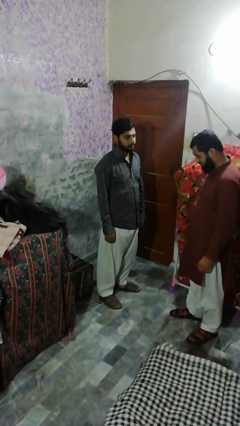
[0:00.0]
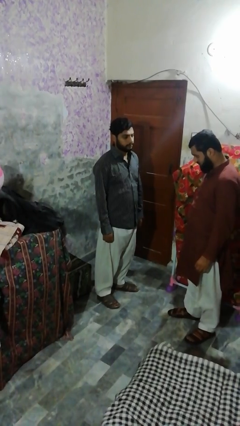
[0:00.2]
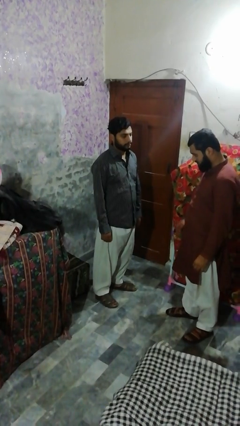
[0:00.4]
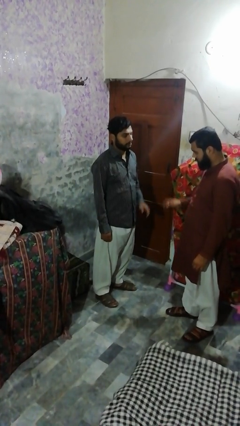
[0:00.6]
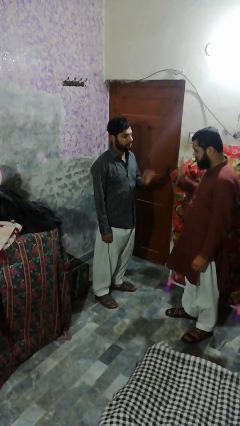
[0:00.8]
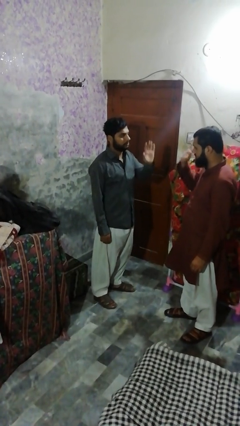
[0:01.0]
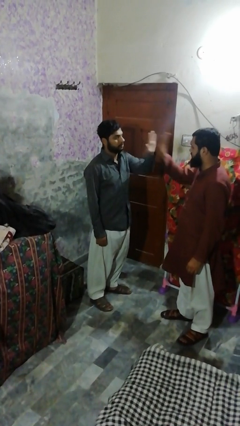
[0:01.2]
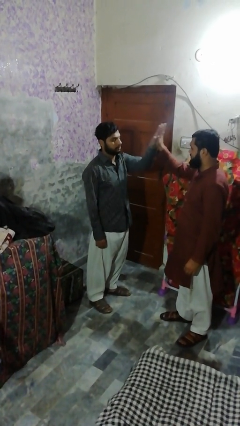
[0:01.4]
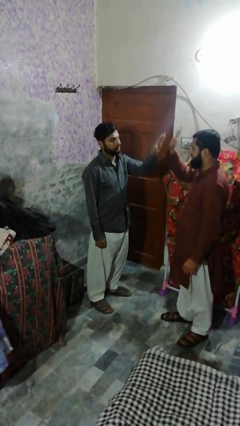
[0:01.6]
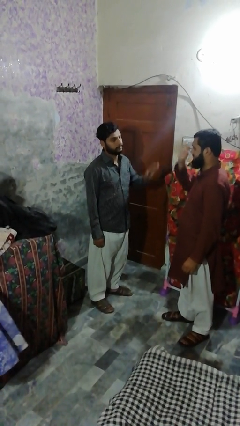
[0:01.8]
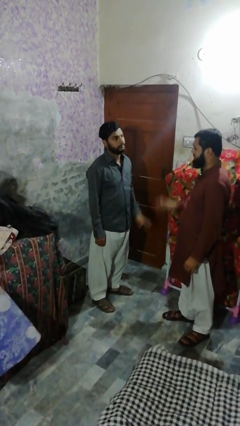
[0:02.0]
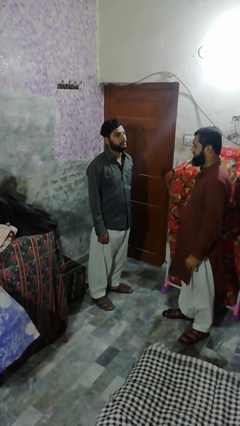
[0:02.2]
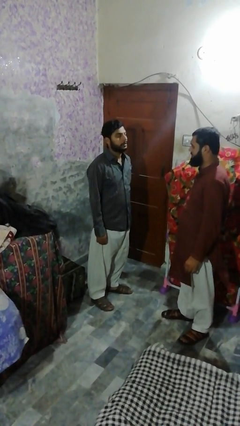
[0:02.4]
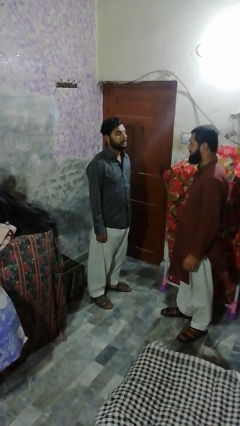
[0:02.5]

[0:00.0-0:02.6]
person highfives hand

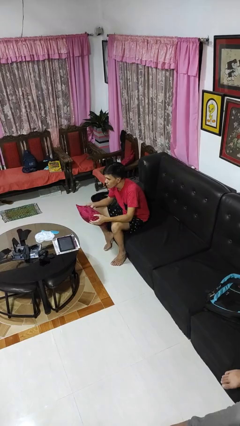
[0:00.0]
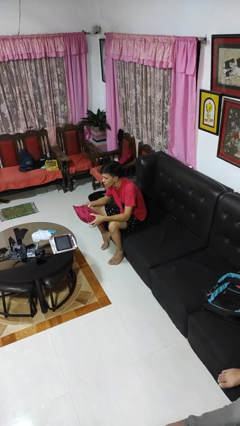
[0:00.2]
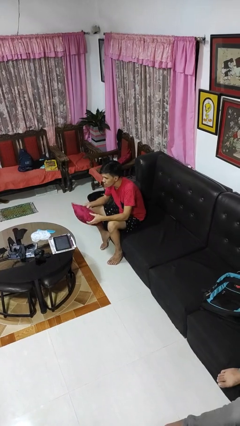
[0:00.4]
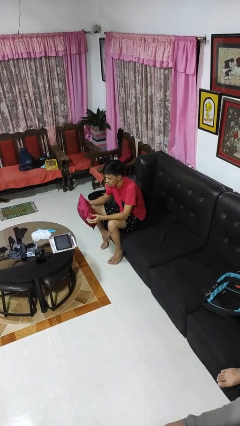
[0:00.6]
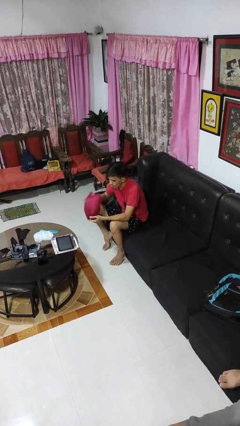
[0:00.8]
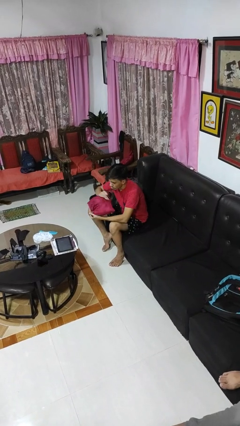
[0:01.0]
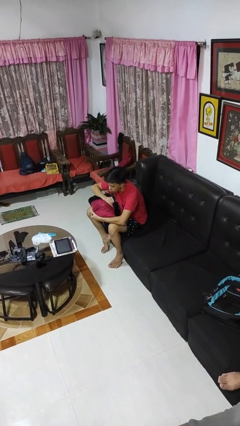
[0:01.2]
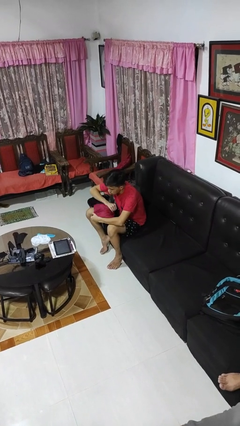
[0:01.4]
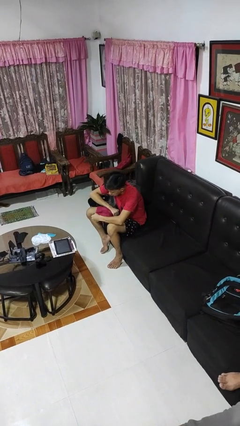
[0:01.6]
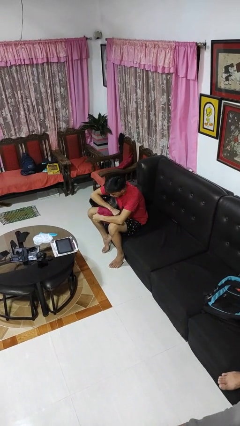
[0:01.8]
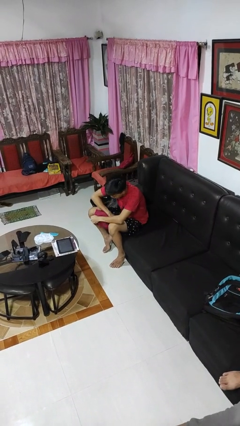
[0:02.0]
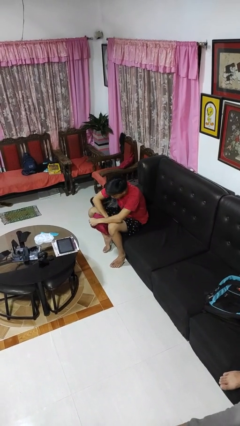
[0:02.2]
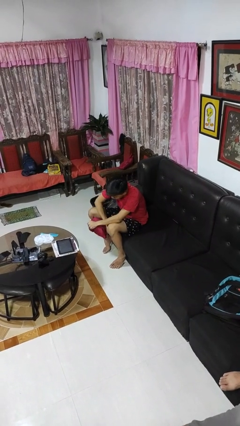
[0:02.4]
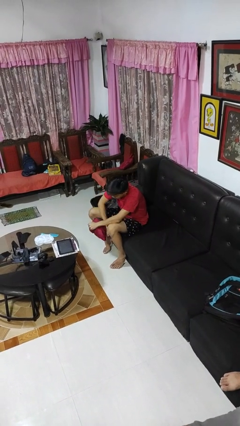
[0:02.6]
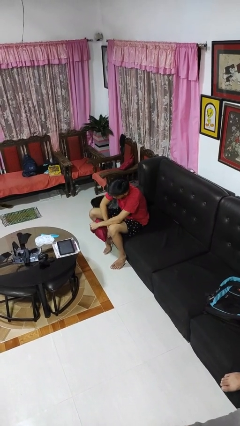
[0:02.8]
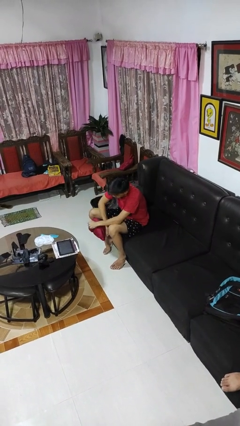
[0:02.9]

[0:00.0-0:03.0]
person squeezes object

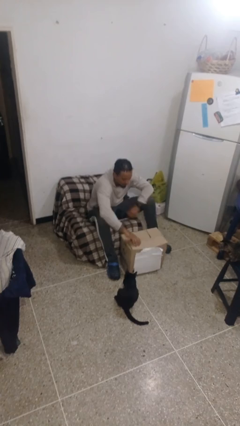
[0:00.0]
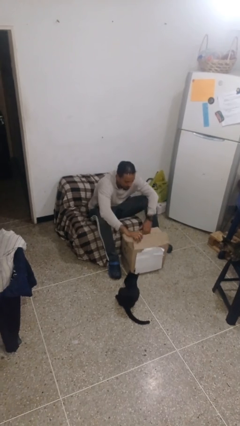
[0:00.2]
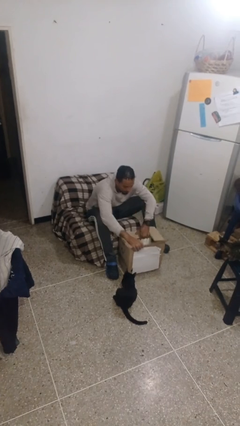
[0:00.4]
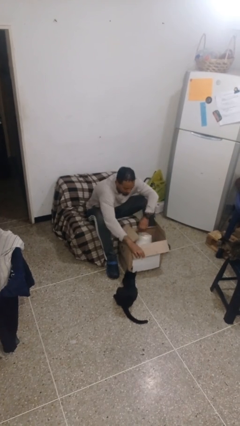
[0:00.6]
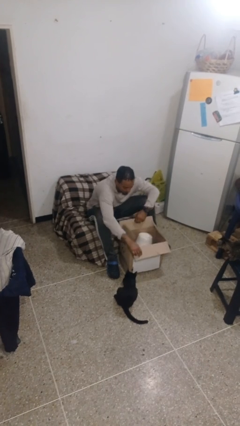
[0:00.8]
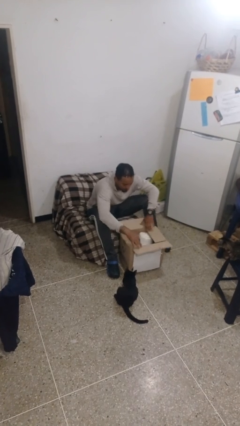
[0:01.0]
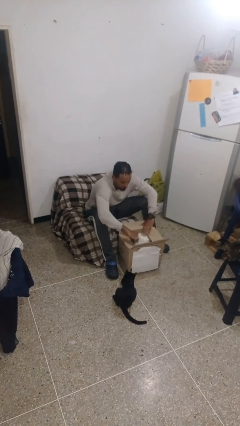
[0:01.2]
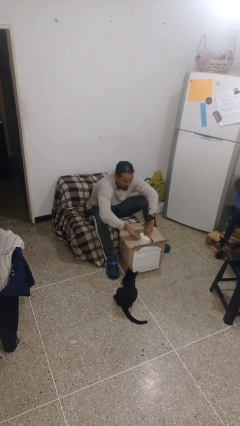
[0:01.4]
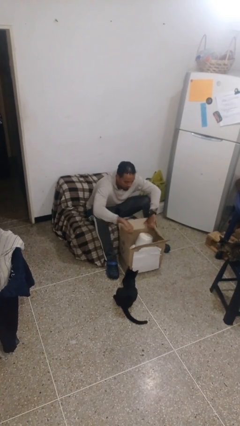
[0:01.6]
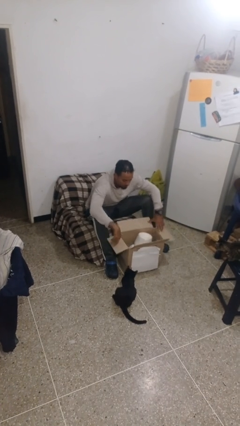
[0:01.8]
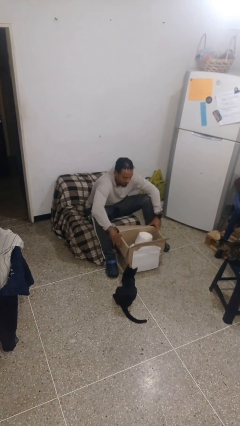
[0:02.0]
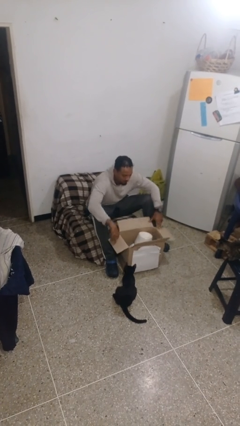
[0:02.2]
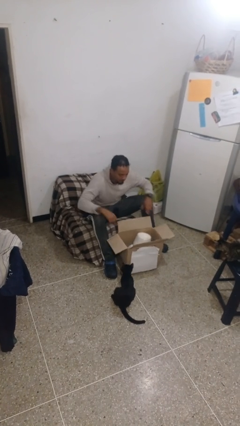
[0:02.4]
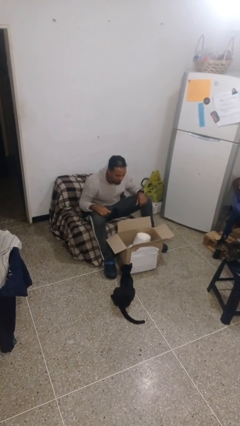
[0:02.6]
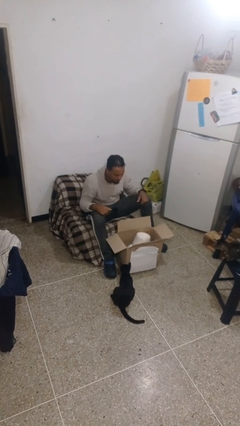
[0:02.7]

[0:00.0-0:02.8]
person opens box

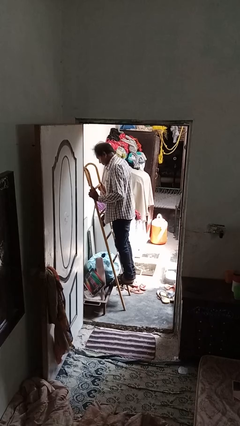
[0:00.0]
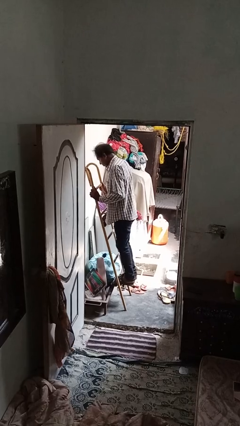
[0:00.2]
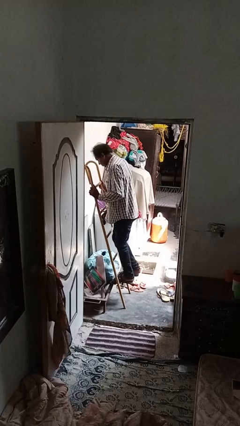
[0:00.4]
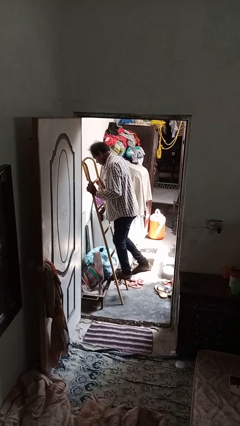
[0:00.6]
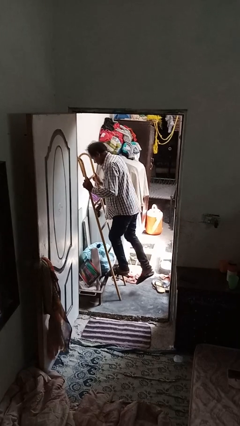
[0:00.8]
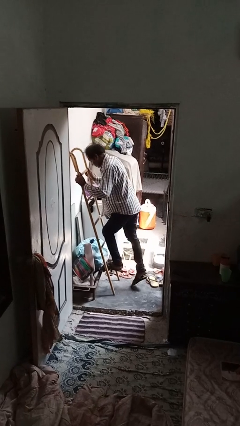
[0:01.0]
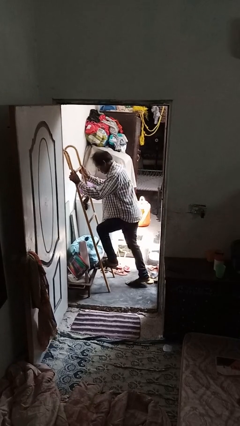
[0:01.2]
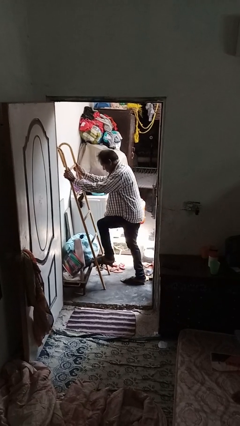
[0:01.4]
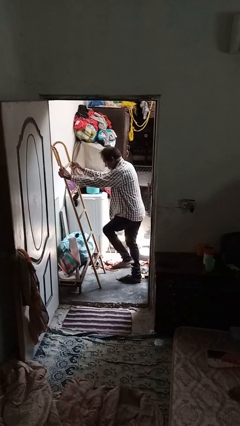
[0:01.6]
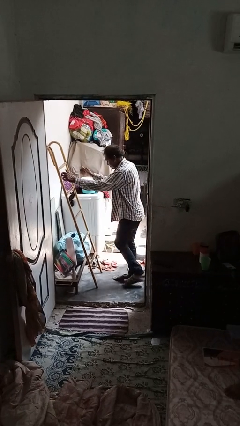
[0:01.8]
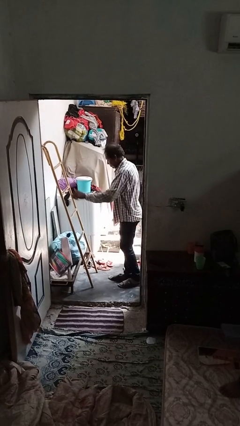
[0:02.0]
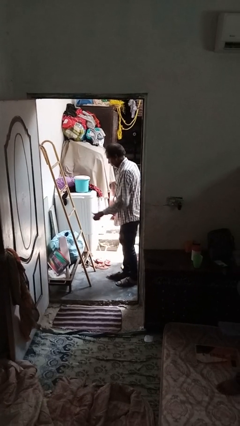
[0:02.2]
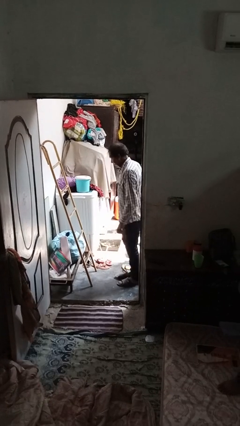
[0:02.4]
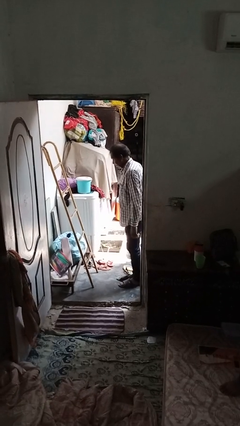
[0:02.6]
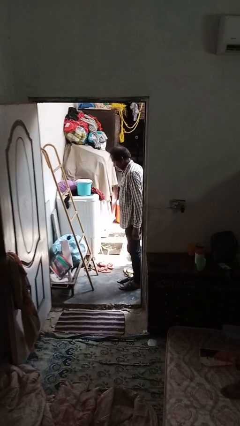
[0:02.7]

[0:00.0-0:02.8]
person climbs down ladder

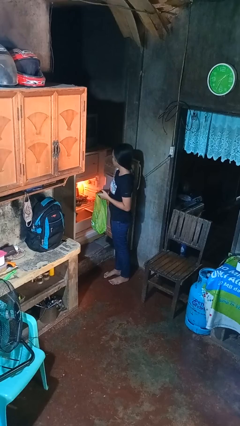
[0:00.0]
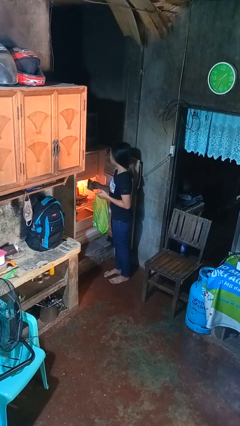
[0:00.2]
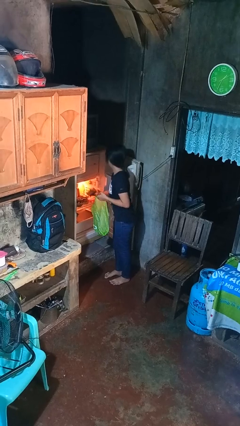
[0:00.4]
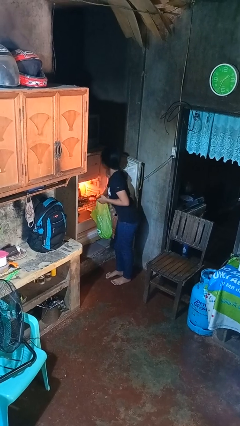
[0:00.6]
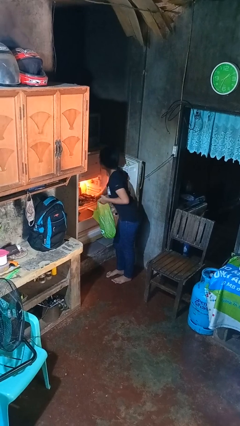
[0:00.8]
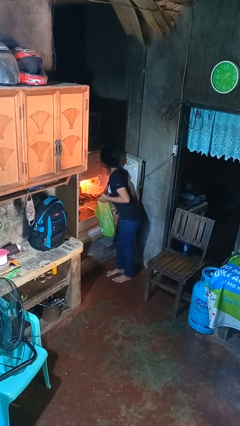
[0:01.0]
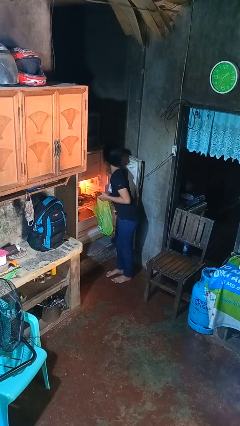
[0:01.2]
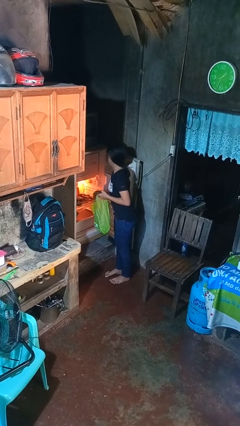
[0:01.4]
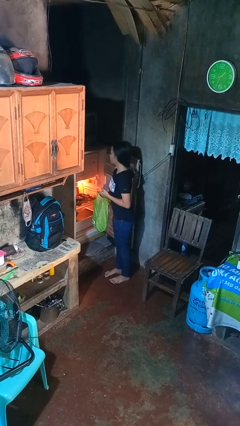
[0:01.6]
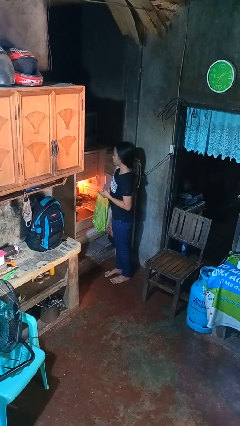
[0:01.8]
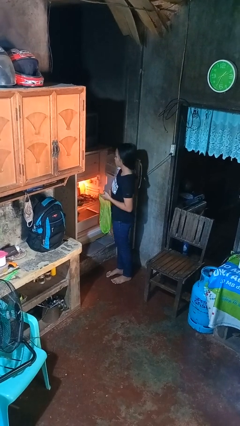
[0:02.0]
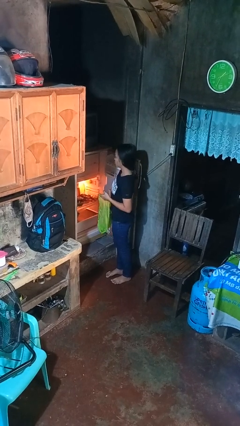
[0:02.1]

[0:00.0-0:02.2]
person loads groceries into refrigerator

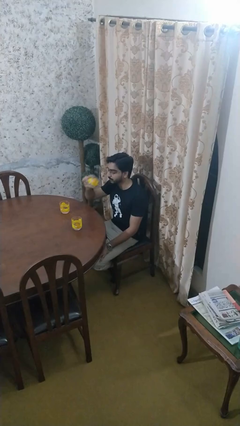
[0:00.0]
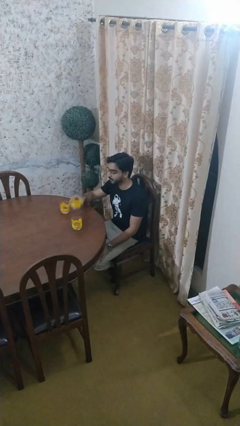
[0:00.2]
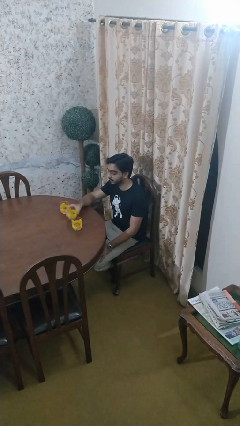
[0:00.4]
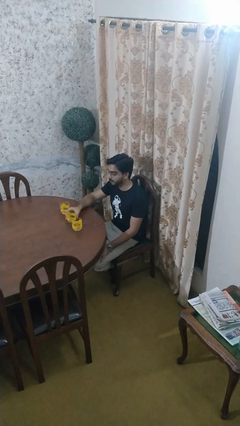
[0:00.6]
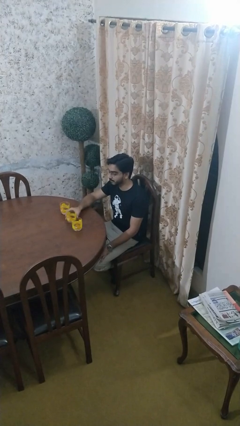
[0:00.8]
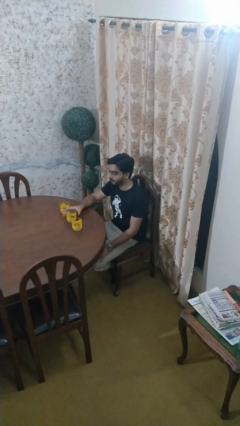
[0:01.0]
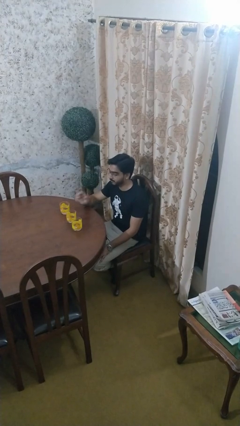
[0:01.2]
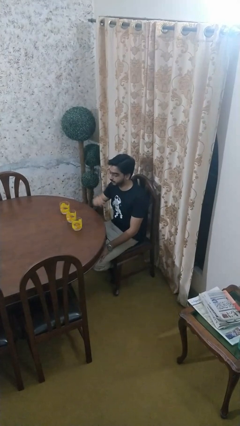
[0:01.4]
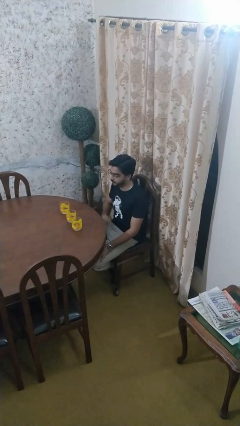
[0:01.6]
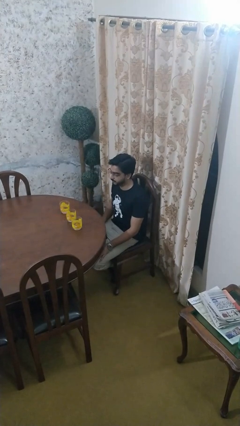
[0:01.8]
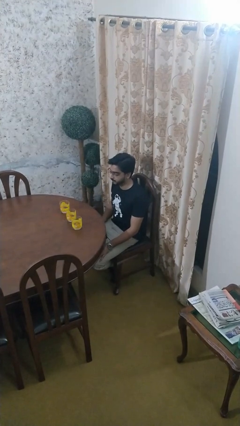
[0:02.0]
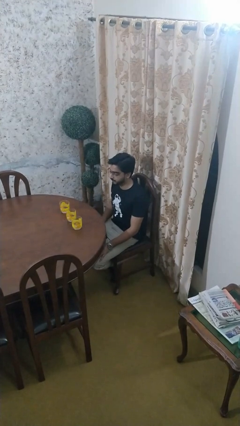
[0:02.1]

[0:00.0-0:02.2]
person puts down object on table

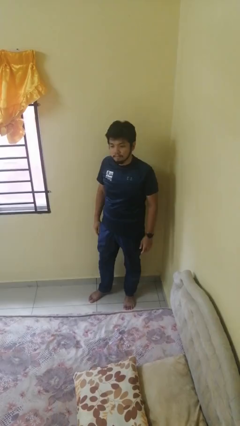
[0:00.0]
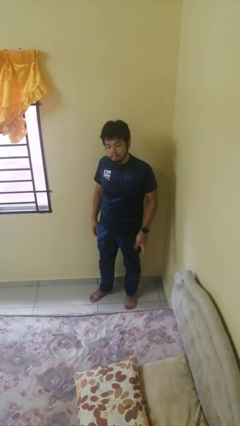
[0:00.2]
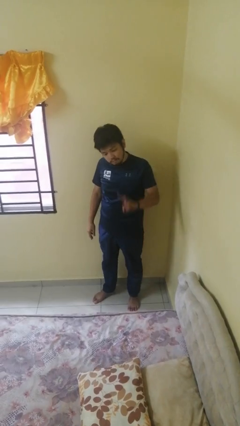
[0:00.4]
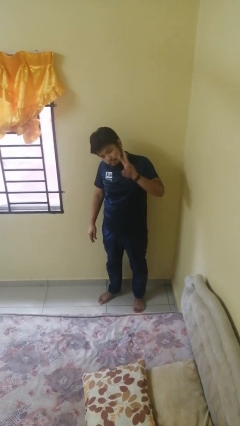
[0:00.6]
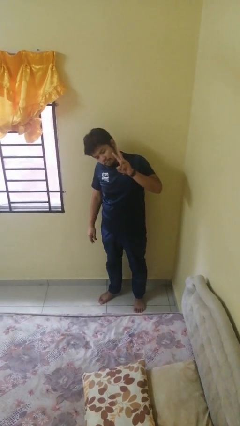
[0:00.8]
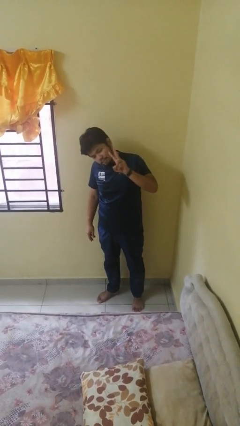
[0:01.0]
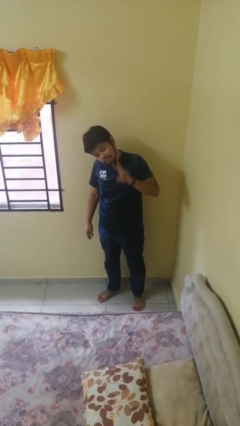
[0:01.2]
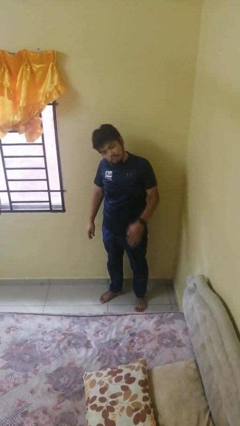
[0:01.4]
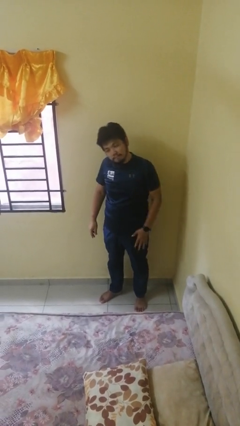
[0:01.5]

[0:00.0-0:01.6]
person gestures peace
